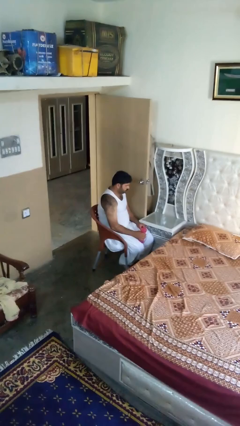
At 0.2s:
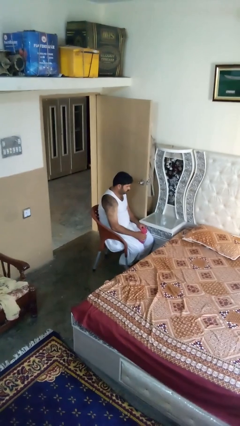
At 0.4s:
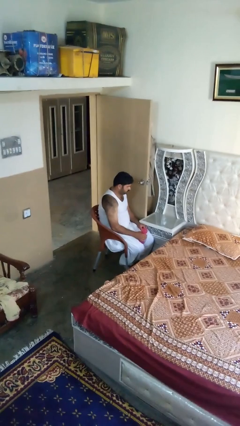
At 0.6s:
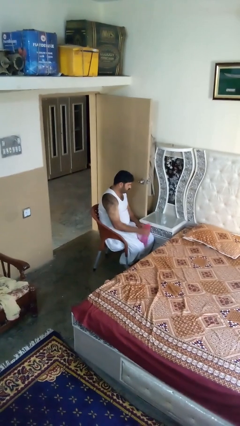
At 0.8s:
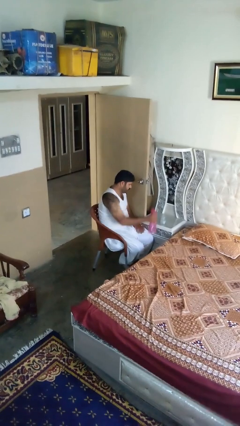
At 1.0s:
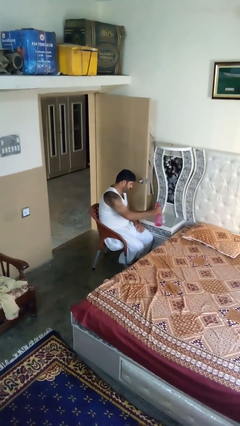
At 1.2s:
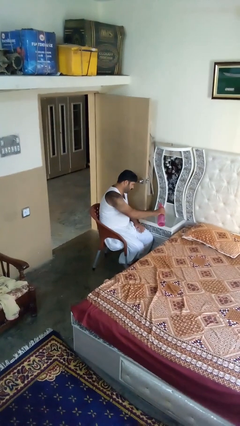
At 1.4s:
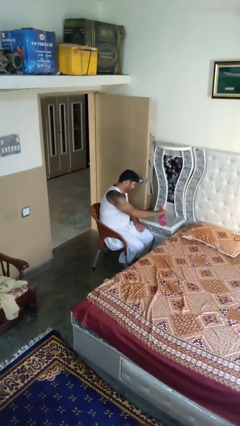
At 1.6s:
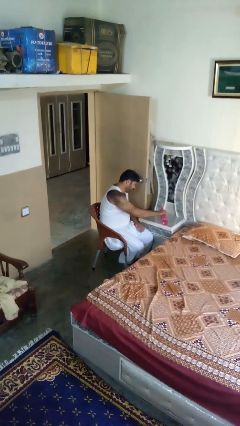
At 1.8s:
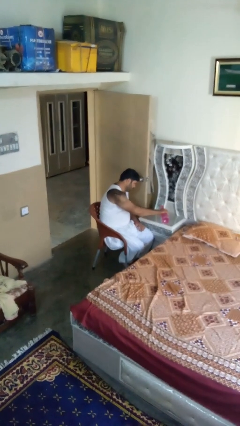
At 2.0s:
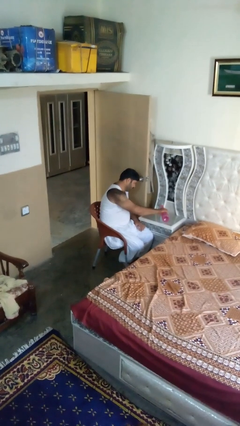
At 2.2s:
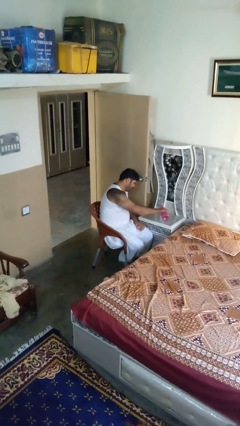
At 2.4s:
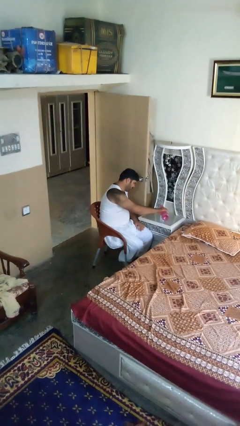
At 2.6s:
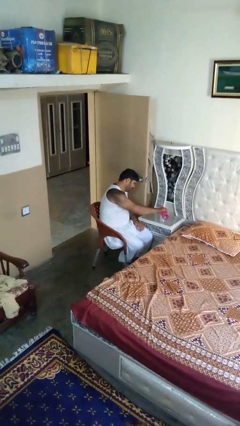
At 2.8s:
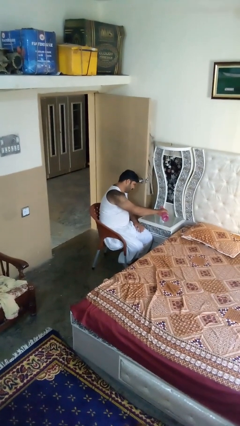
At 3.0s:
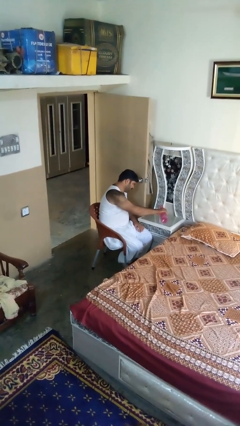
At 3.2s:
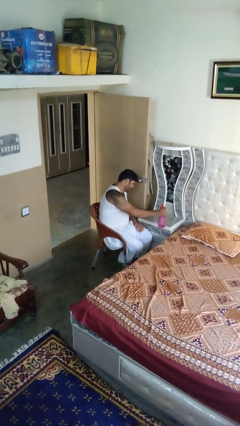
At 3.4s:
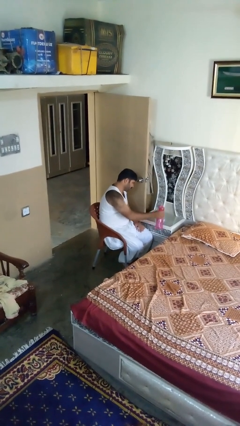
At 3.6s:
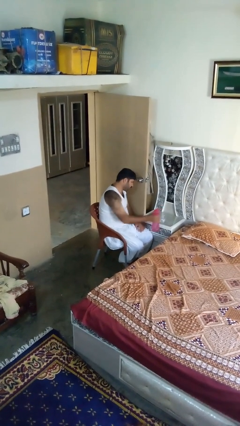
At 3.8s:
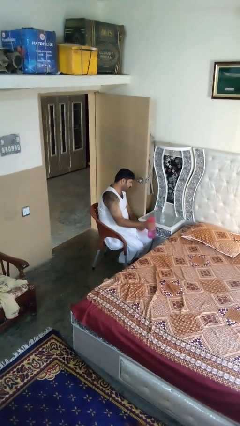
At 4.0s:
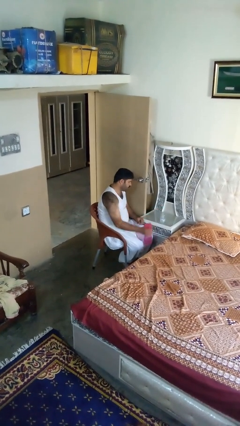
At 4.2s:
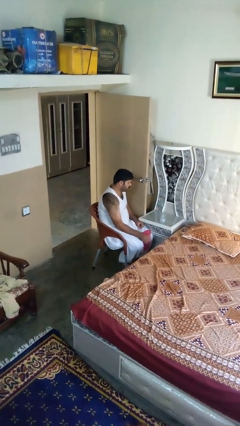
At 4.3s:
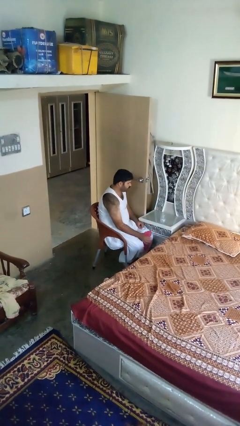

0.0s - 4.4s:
person pours liquid into cup

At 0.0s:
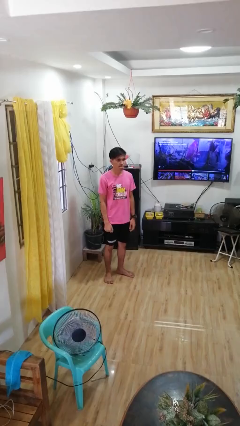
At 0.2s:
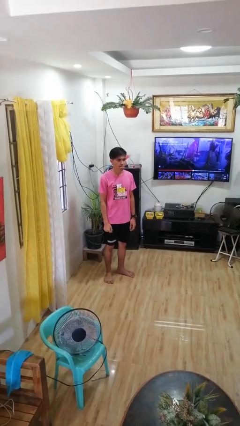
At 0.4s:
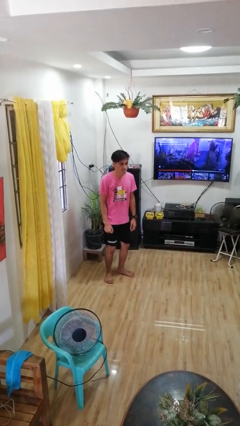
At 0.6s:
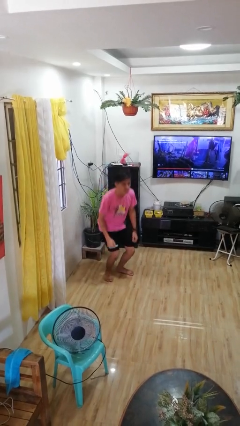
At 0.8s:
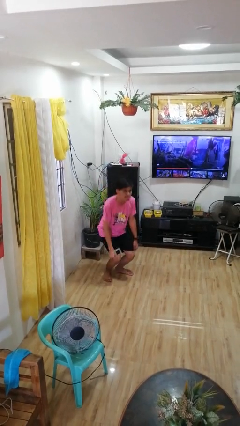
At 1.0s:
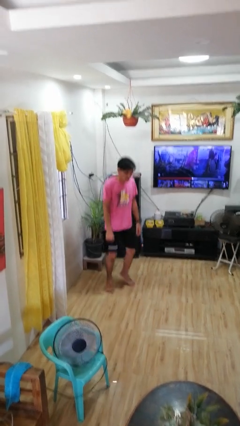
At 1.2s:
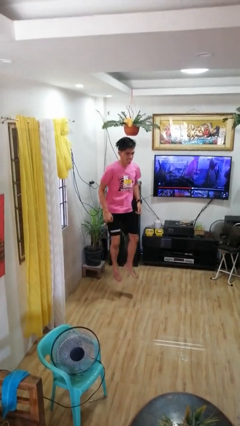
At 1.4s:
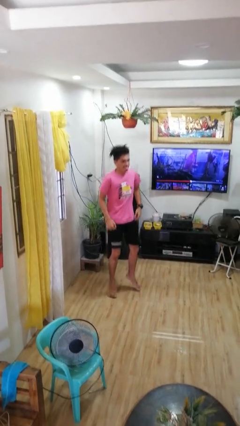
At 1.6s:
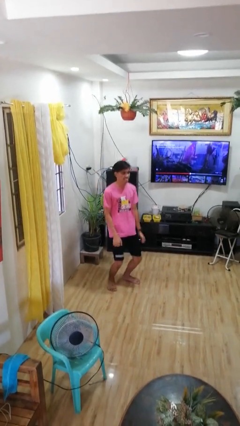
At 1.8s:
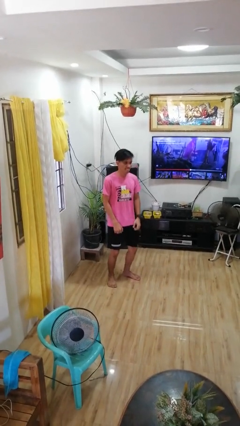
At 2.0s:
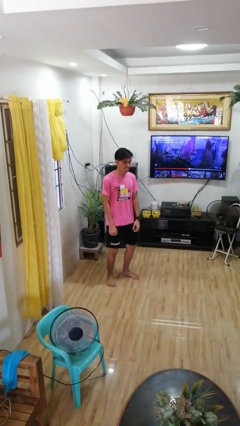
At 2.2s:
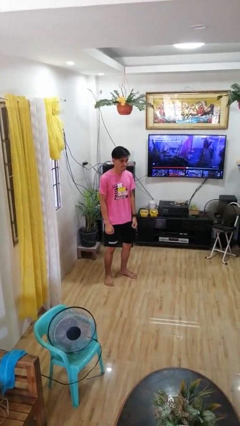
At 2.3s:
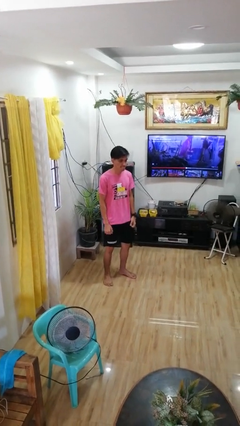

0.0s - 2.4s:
person jumps

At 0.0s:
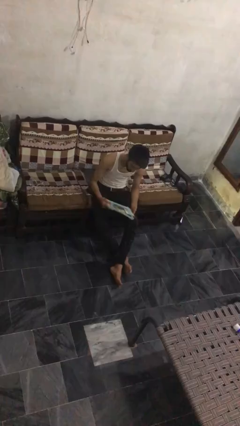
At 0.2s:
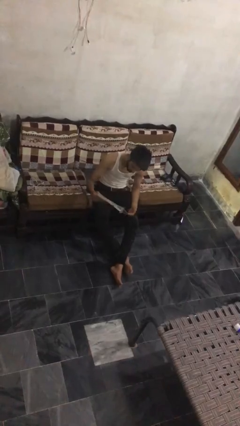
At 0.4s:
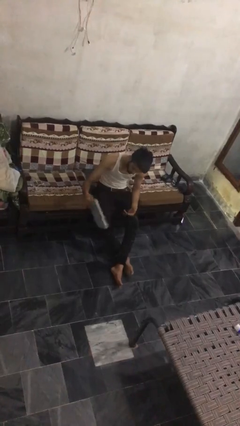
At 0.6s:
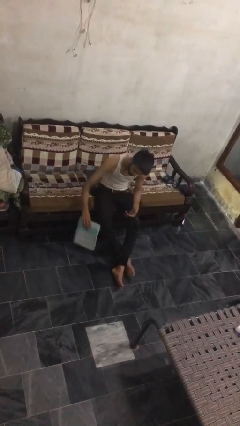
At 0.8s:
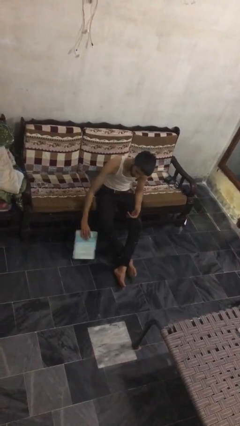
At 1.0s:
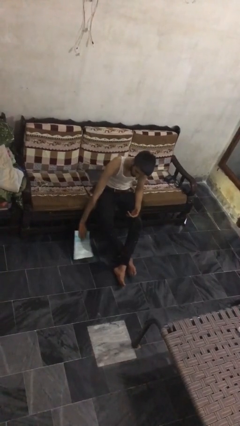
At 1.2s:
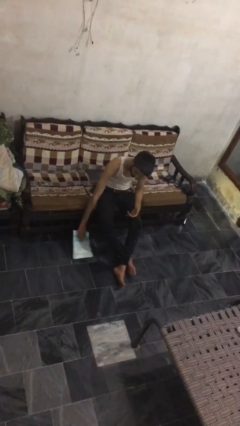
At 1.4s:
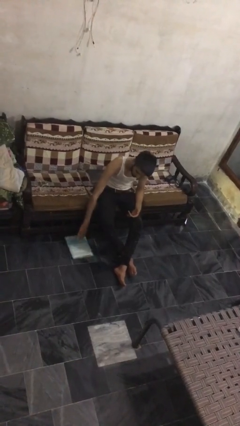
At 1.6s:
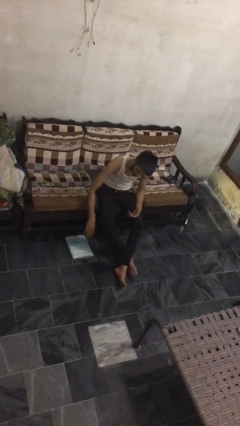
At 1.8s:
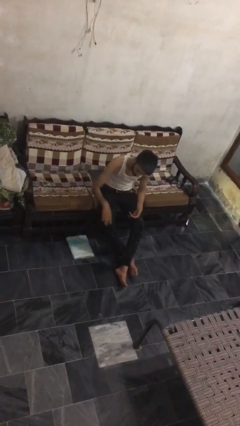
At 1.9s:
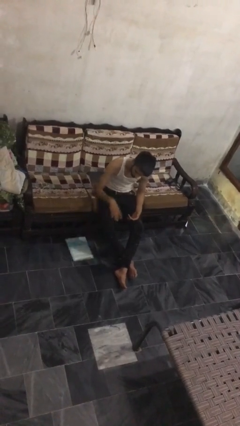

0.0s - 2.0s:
person puts down object on floor

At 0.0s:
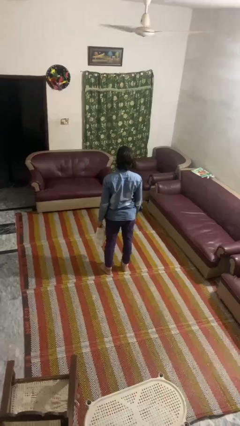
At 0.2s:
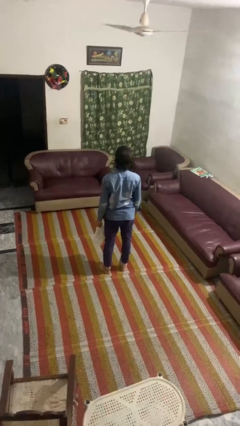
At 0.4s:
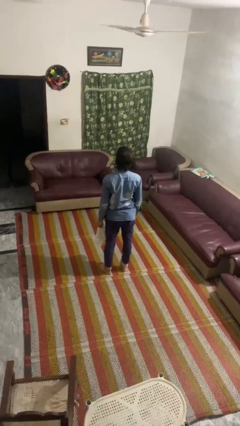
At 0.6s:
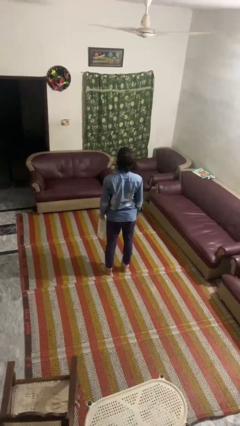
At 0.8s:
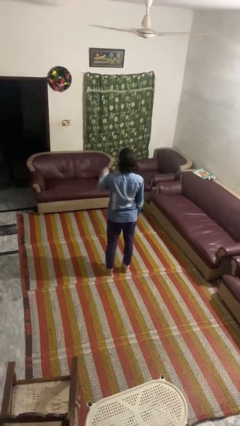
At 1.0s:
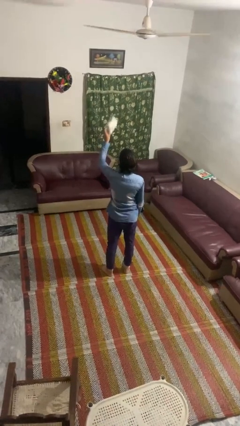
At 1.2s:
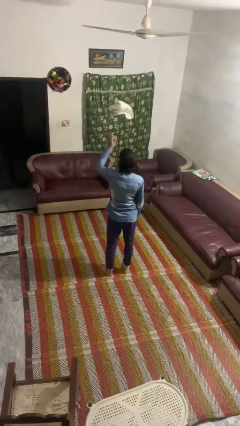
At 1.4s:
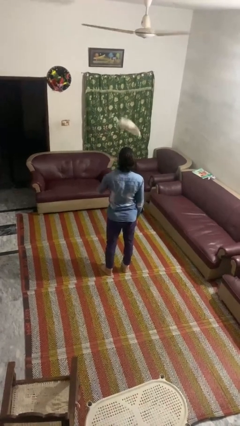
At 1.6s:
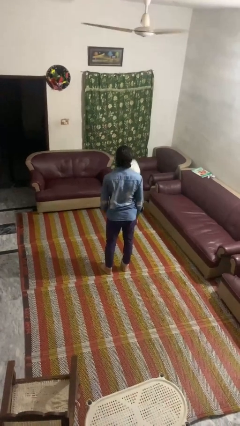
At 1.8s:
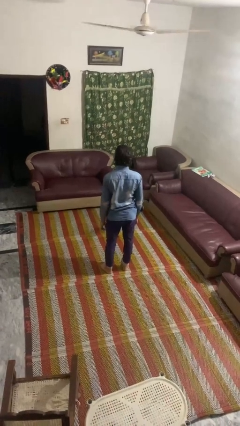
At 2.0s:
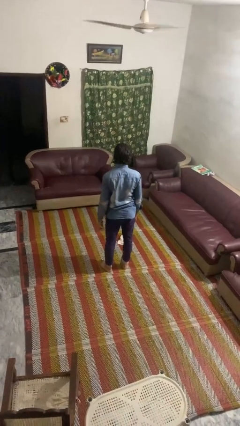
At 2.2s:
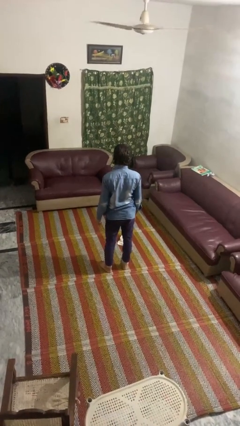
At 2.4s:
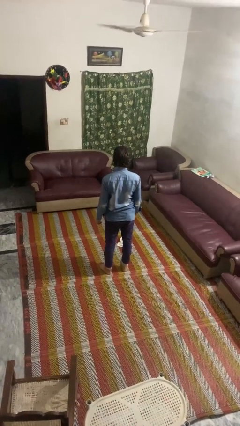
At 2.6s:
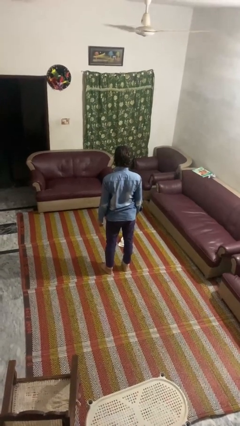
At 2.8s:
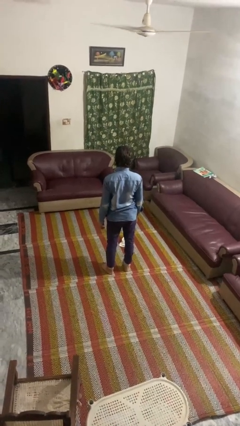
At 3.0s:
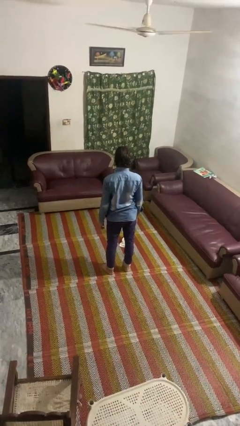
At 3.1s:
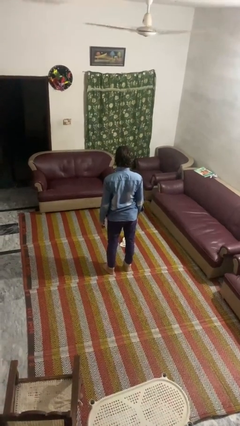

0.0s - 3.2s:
person throws object into air

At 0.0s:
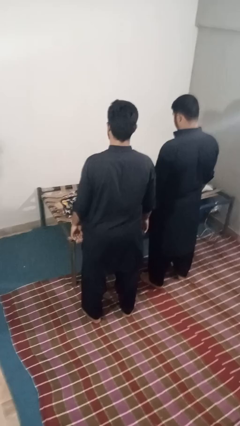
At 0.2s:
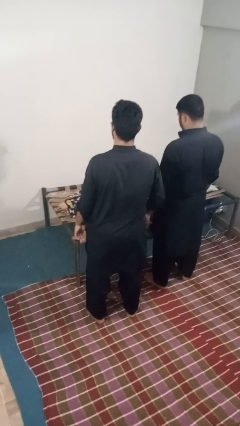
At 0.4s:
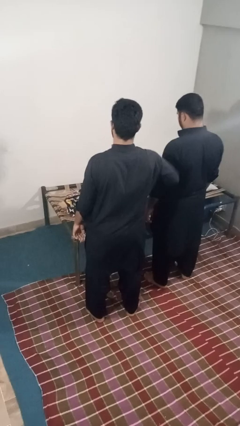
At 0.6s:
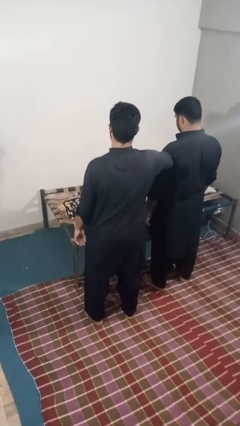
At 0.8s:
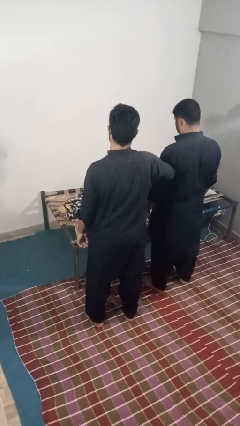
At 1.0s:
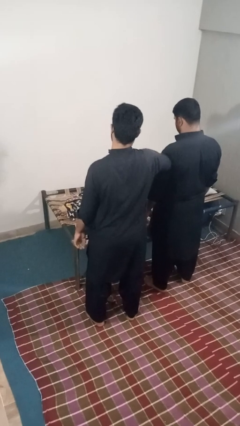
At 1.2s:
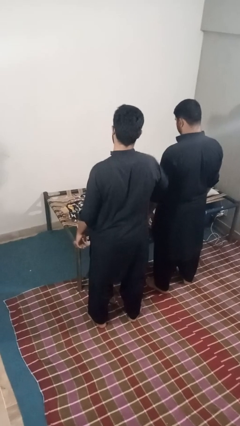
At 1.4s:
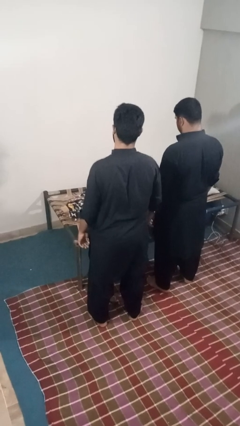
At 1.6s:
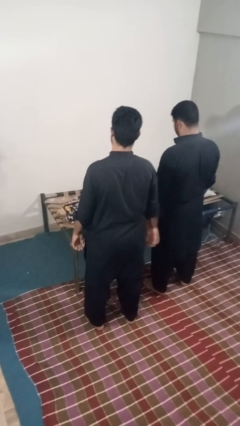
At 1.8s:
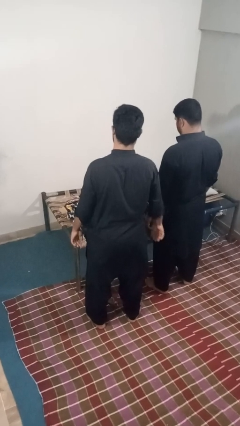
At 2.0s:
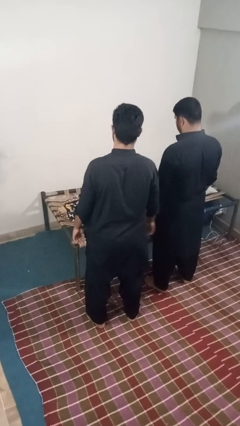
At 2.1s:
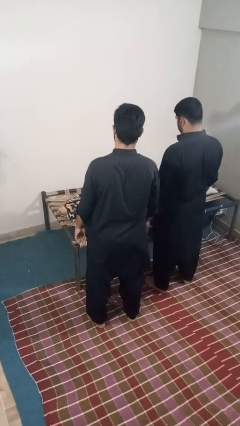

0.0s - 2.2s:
person nudges person with elbow

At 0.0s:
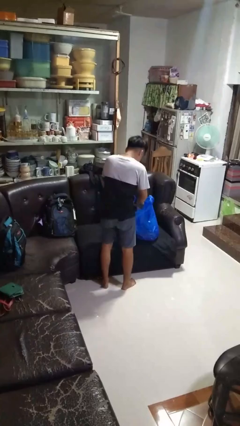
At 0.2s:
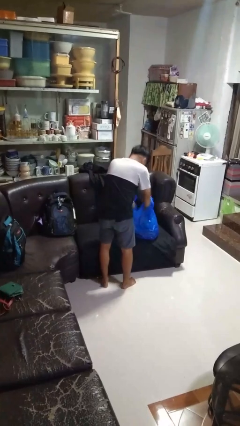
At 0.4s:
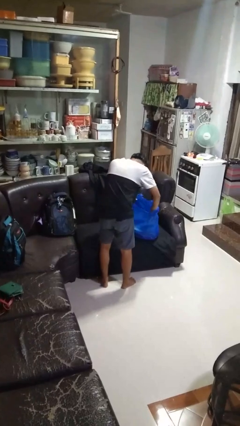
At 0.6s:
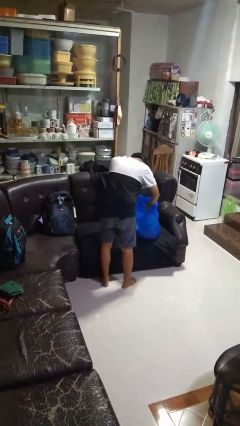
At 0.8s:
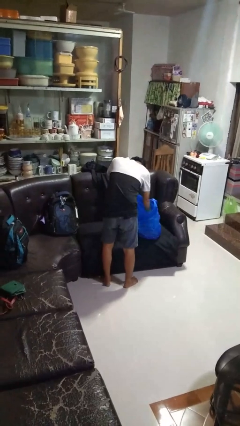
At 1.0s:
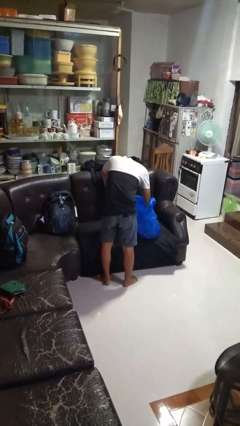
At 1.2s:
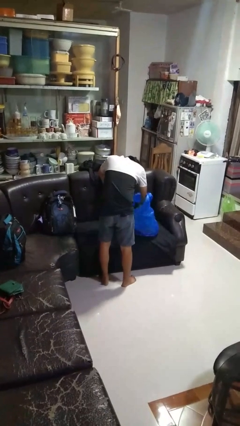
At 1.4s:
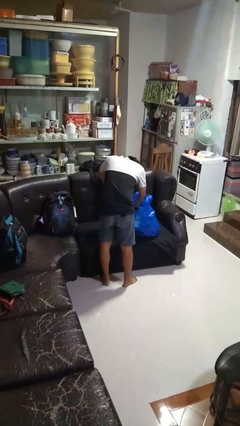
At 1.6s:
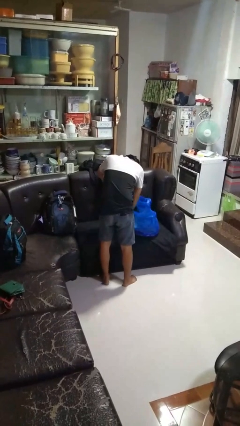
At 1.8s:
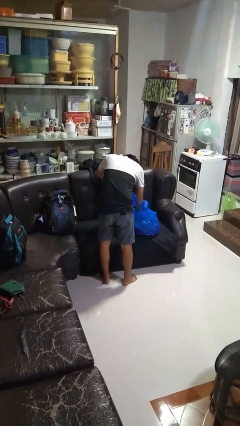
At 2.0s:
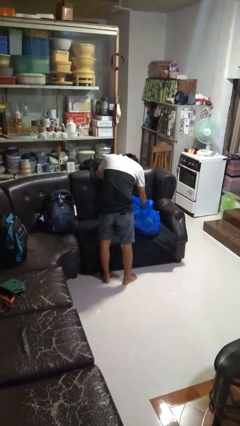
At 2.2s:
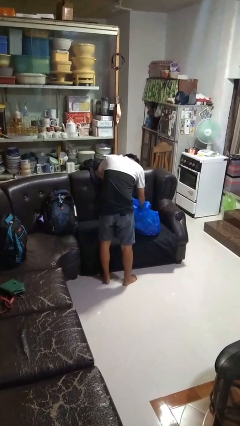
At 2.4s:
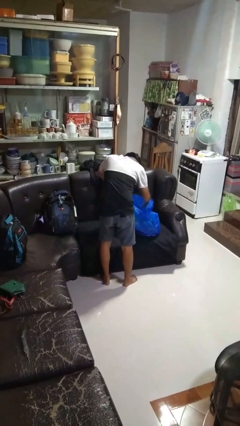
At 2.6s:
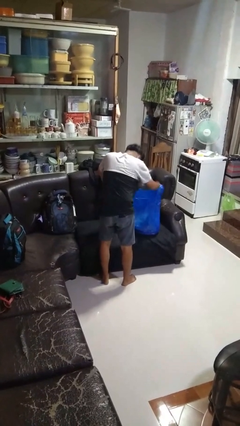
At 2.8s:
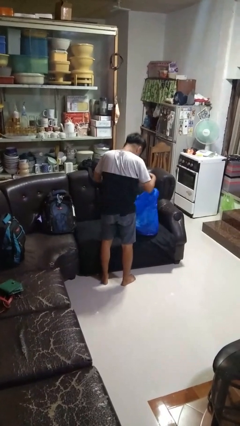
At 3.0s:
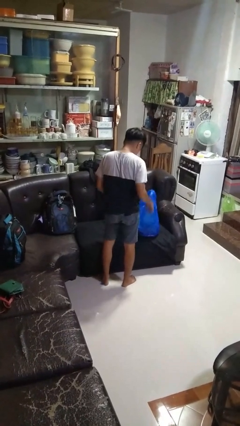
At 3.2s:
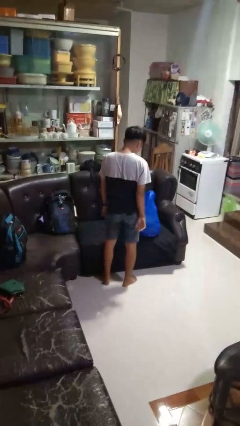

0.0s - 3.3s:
person searches in bag

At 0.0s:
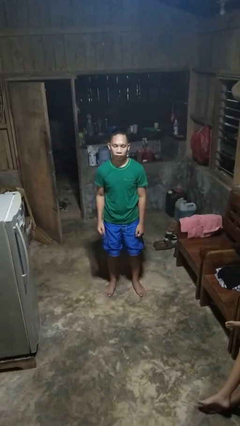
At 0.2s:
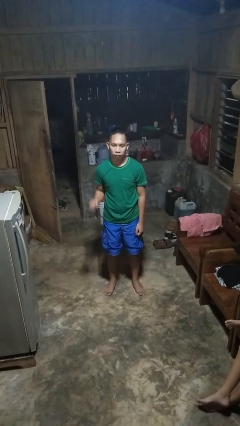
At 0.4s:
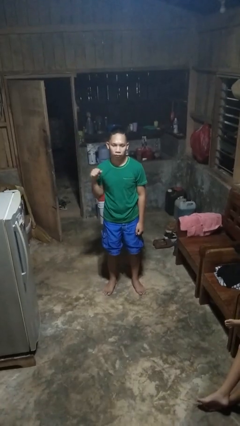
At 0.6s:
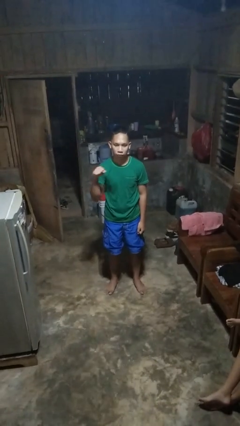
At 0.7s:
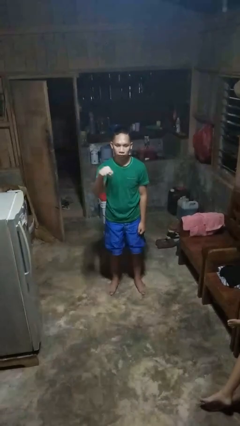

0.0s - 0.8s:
person punches
